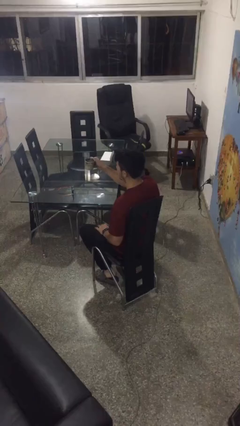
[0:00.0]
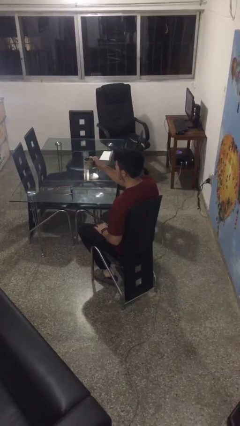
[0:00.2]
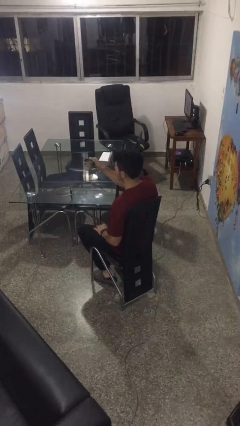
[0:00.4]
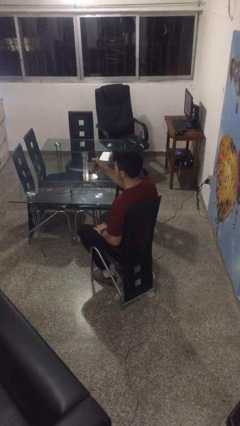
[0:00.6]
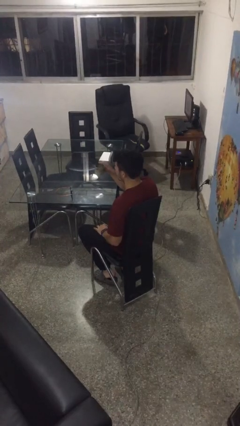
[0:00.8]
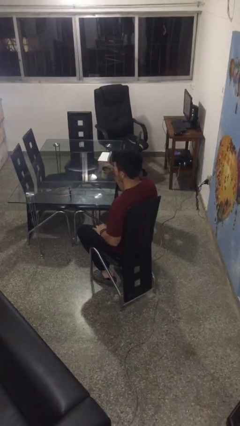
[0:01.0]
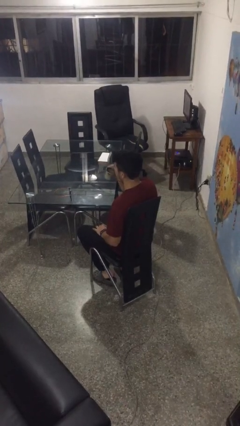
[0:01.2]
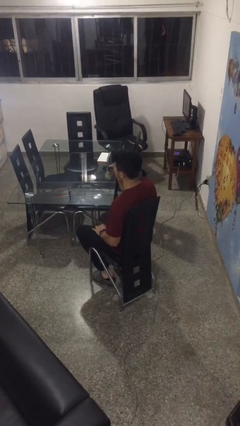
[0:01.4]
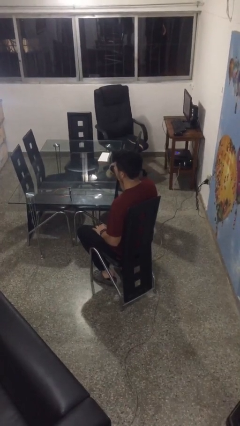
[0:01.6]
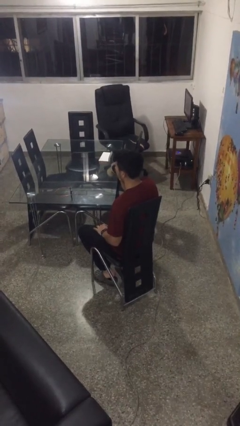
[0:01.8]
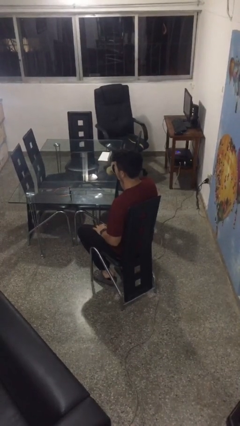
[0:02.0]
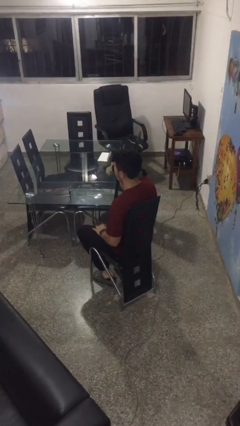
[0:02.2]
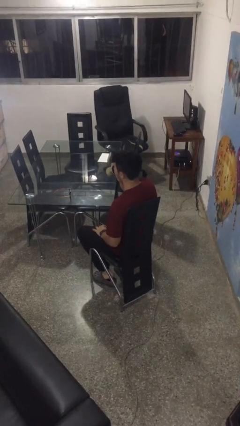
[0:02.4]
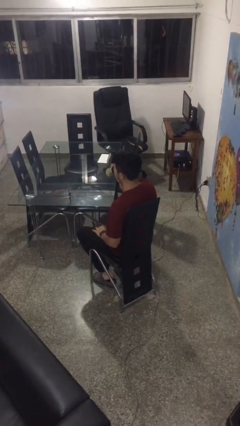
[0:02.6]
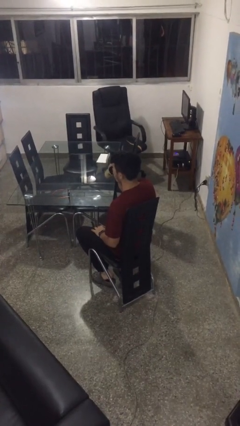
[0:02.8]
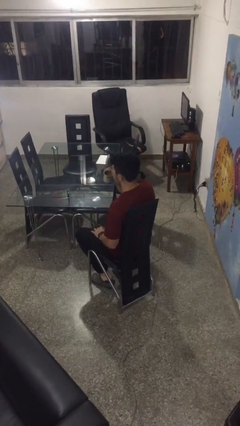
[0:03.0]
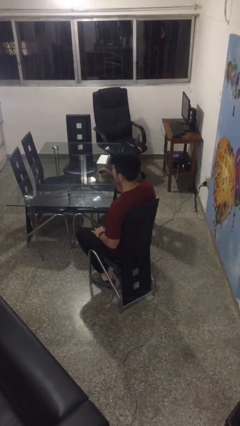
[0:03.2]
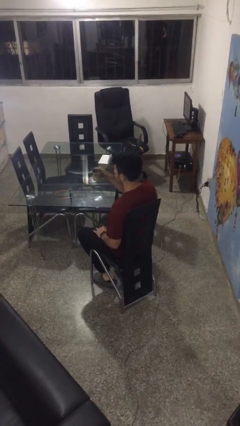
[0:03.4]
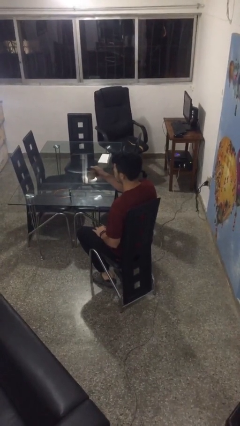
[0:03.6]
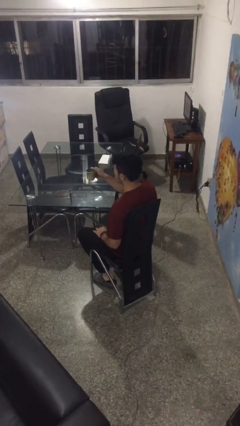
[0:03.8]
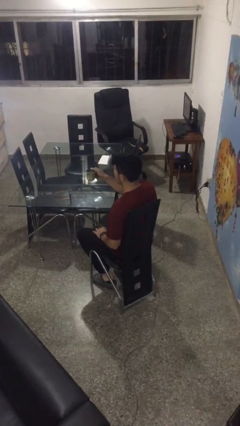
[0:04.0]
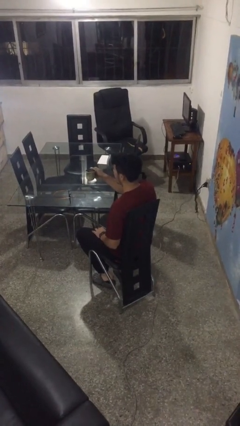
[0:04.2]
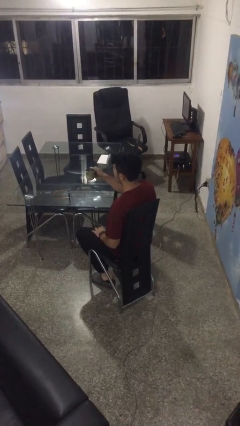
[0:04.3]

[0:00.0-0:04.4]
person drinks from mug

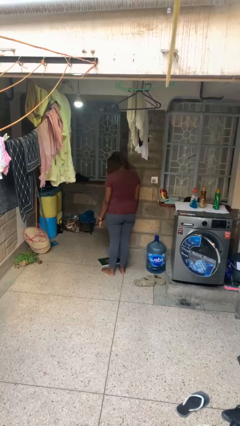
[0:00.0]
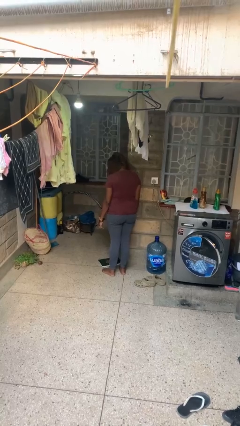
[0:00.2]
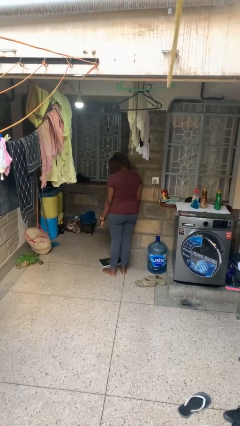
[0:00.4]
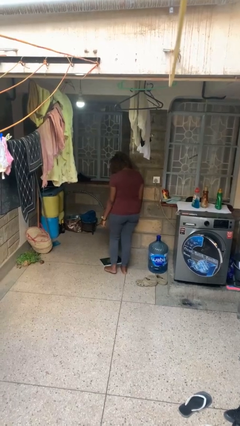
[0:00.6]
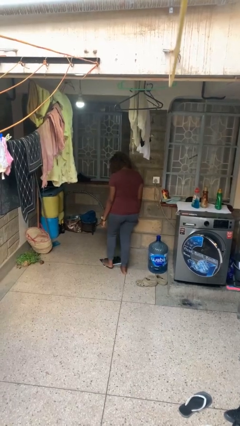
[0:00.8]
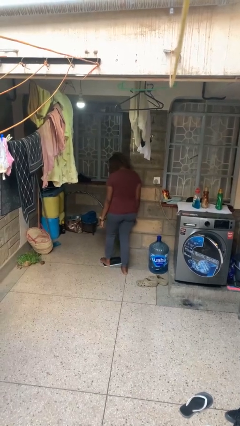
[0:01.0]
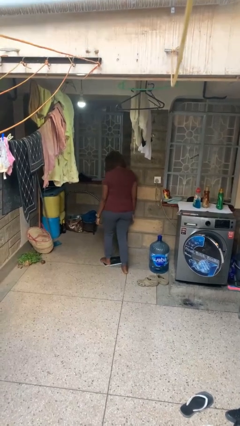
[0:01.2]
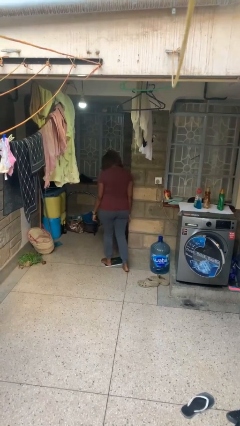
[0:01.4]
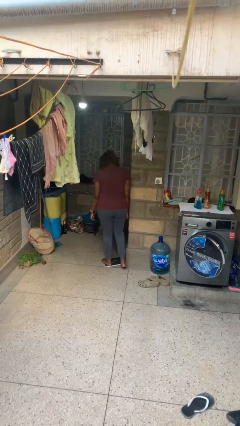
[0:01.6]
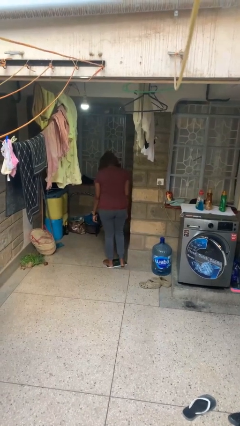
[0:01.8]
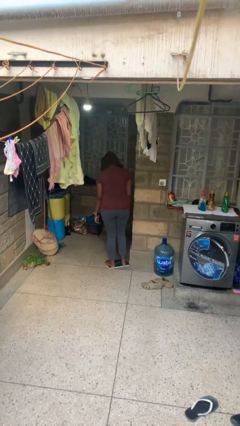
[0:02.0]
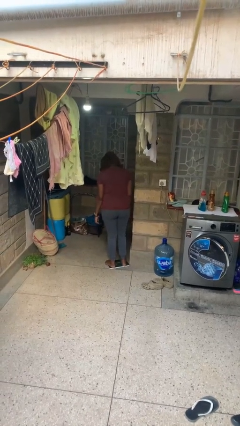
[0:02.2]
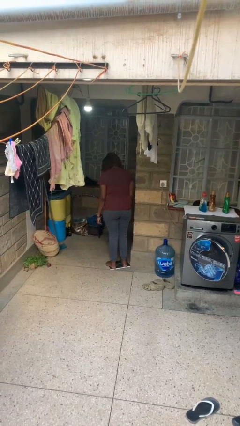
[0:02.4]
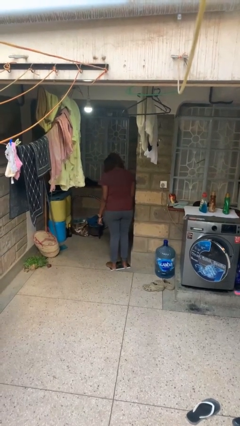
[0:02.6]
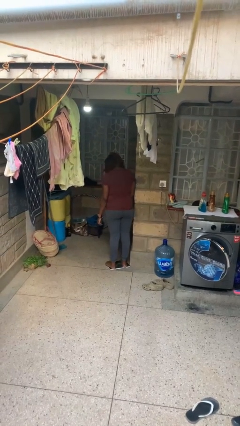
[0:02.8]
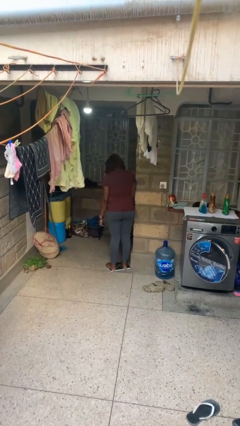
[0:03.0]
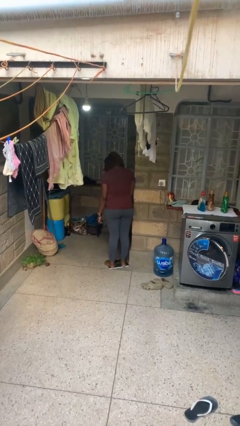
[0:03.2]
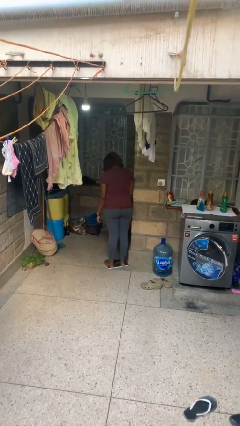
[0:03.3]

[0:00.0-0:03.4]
person uses bodyweight scale

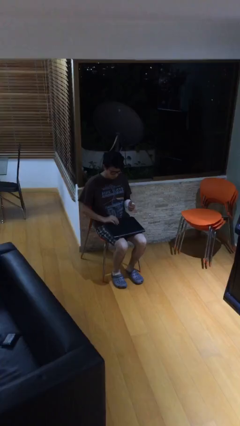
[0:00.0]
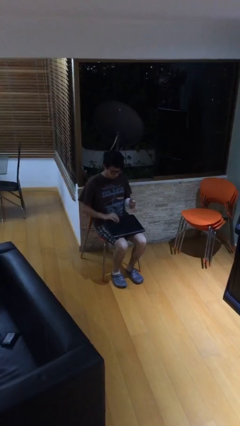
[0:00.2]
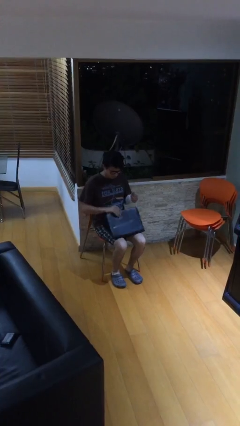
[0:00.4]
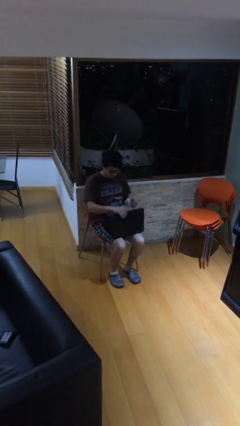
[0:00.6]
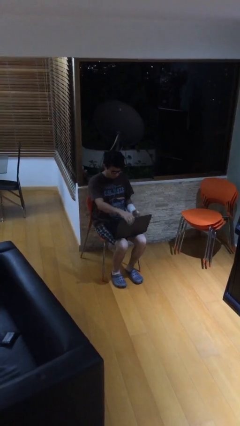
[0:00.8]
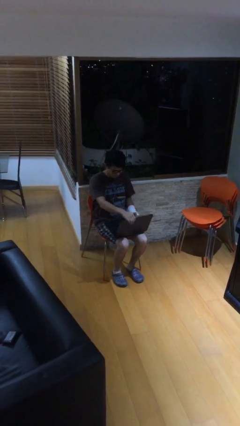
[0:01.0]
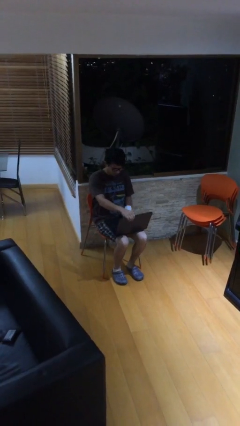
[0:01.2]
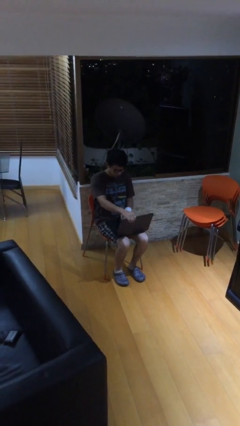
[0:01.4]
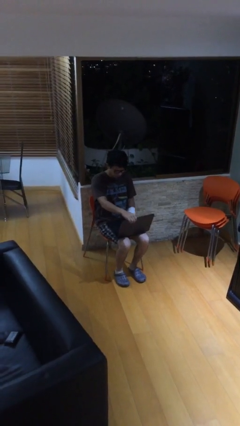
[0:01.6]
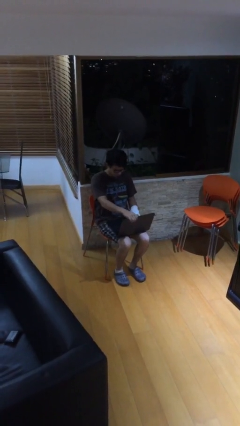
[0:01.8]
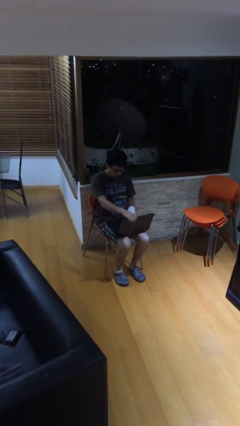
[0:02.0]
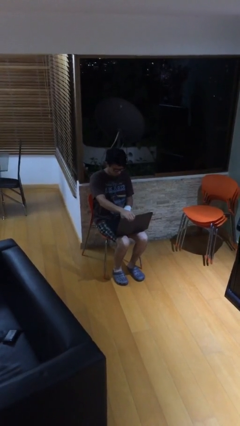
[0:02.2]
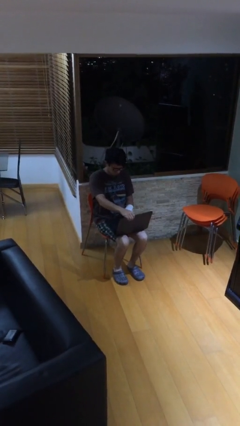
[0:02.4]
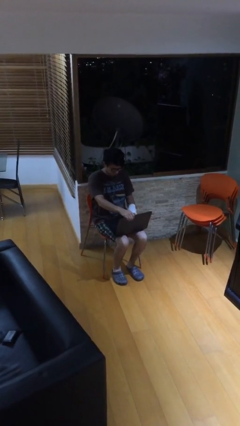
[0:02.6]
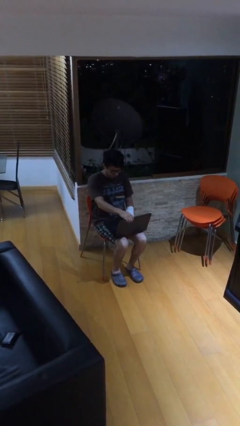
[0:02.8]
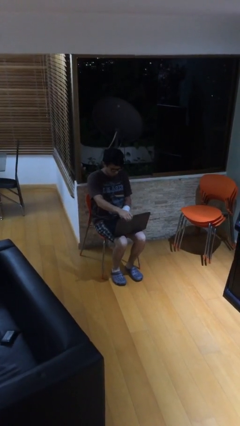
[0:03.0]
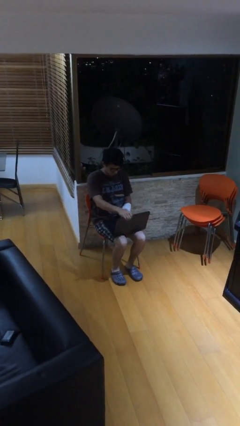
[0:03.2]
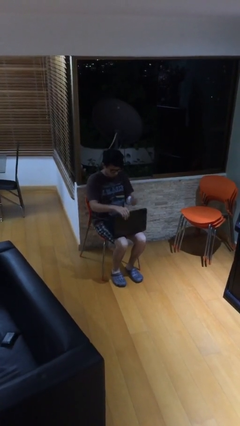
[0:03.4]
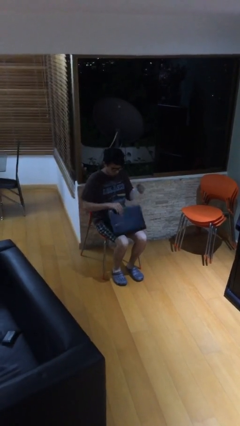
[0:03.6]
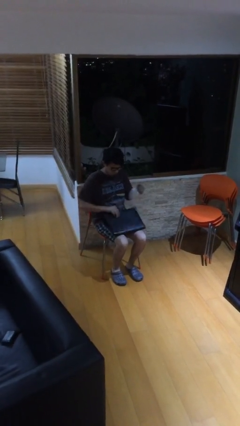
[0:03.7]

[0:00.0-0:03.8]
person interacts with laptop

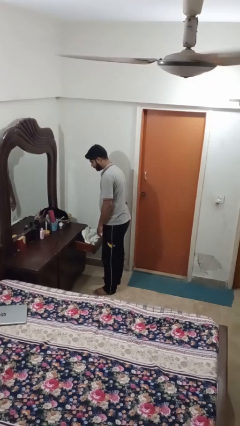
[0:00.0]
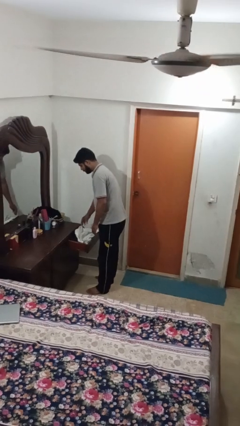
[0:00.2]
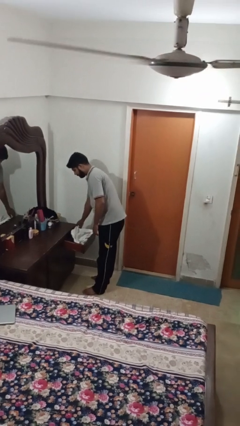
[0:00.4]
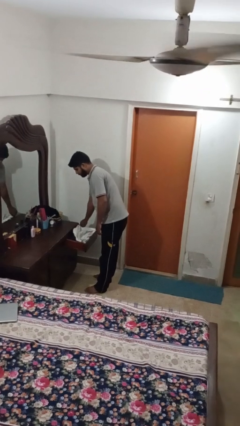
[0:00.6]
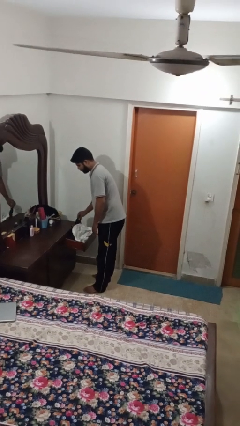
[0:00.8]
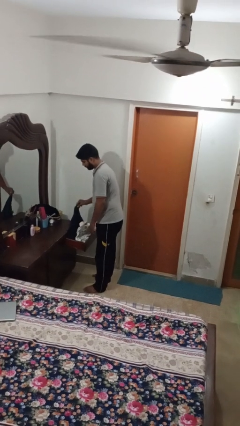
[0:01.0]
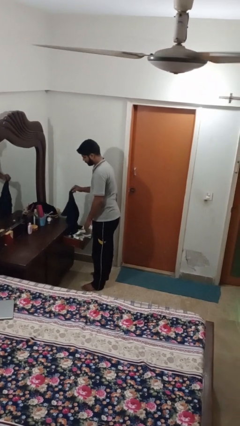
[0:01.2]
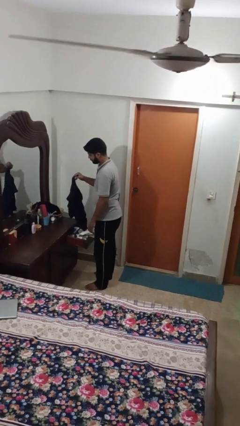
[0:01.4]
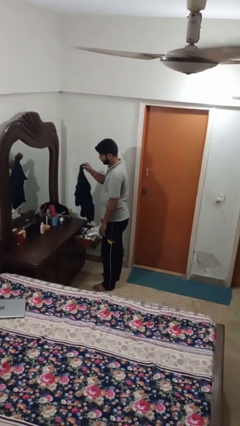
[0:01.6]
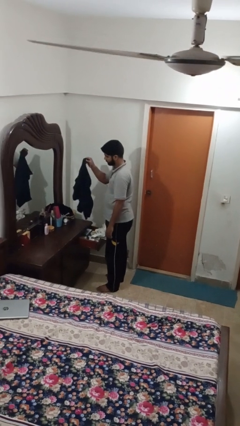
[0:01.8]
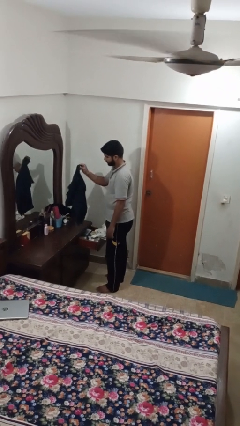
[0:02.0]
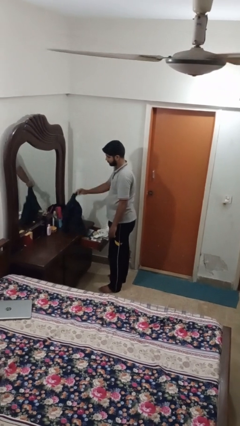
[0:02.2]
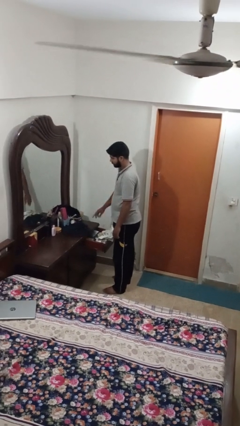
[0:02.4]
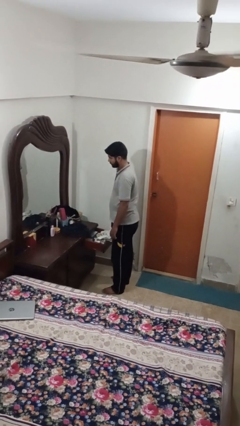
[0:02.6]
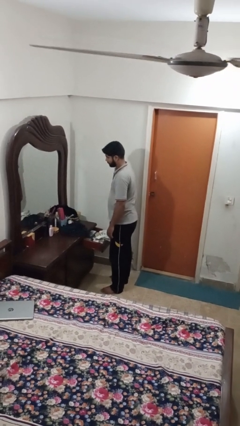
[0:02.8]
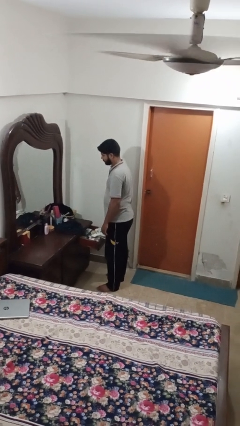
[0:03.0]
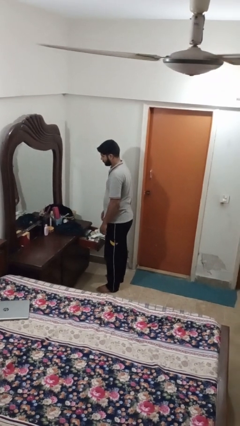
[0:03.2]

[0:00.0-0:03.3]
person takes clothes from dresser

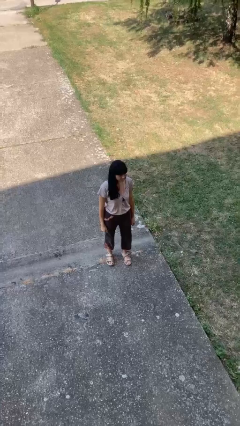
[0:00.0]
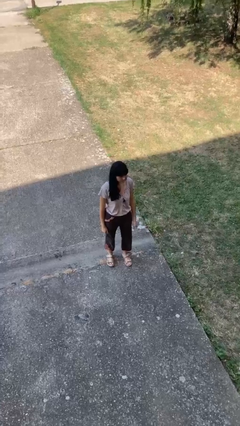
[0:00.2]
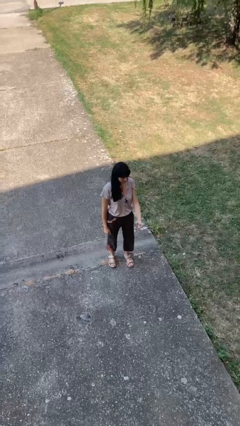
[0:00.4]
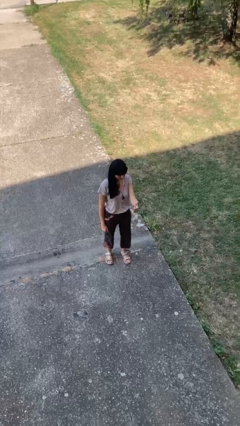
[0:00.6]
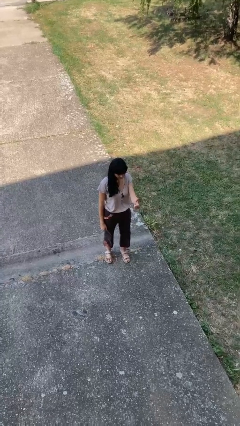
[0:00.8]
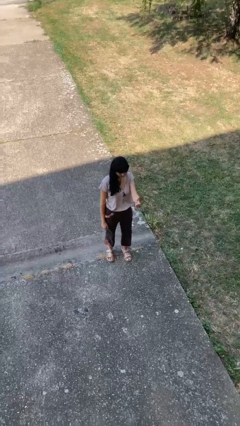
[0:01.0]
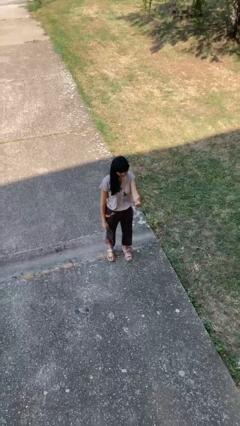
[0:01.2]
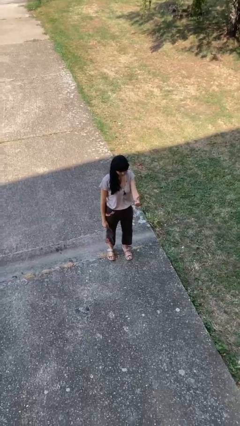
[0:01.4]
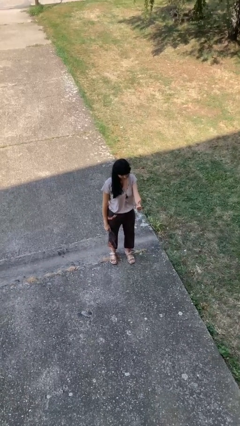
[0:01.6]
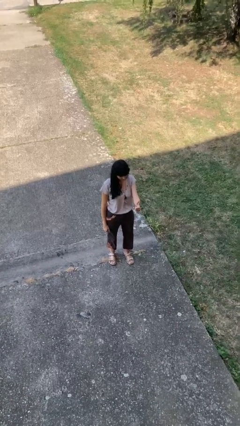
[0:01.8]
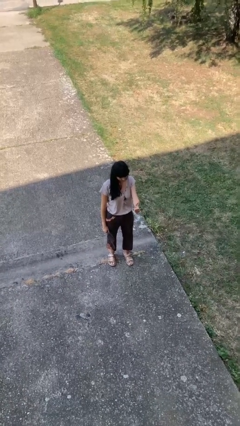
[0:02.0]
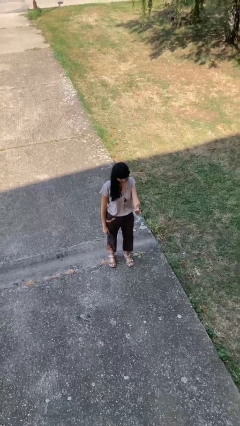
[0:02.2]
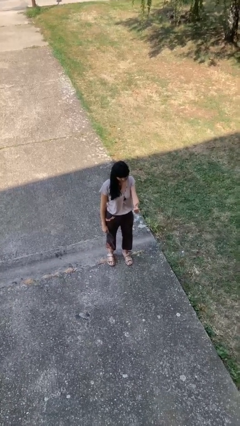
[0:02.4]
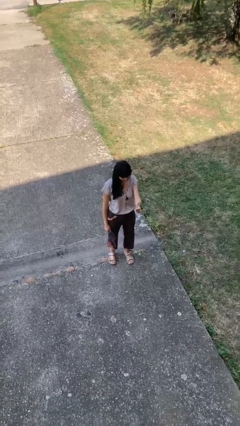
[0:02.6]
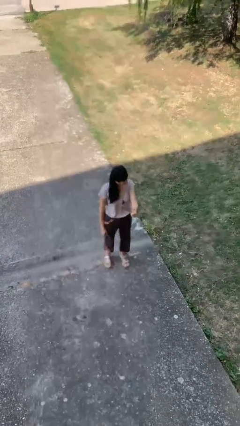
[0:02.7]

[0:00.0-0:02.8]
person gestures thumbs up
